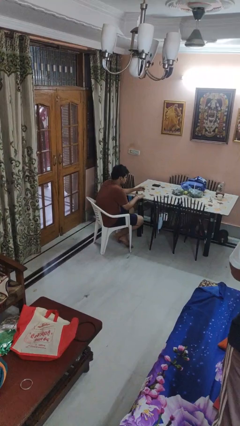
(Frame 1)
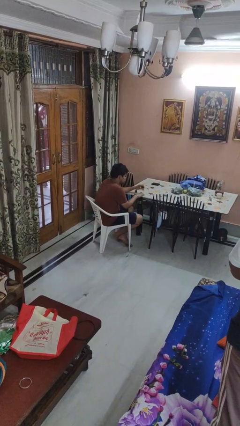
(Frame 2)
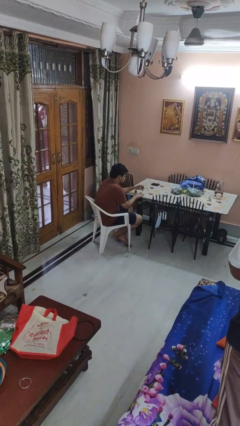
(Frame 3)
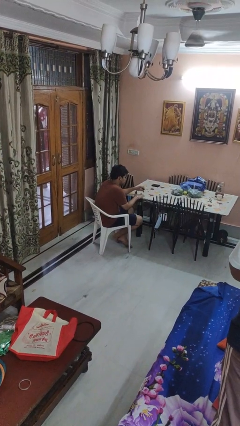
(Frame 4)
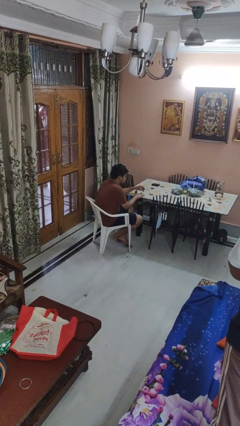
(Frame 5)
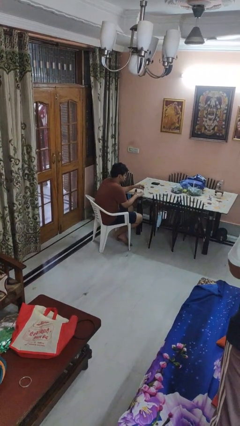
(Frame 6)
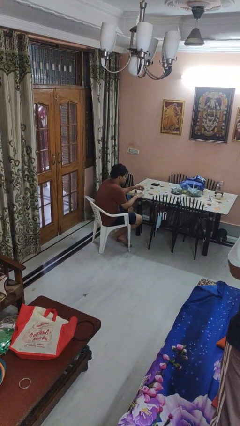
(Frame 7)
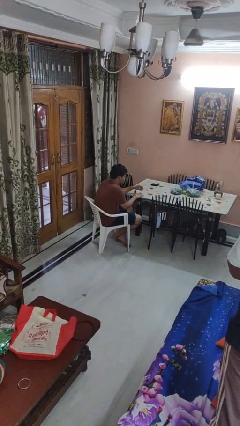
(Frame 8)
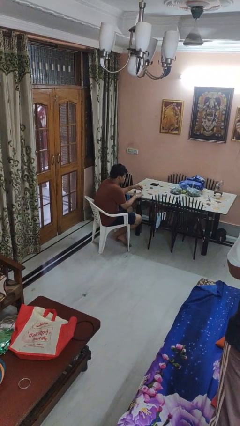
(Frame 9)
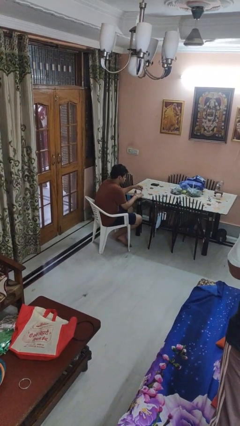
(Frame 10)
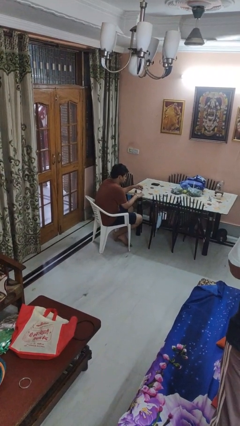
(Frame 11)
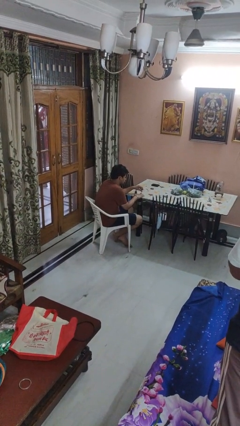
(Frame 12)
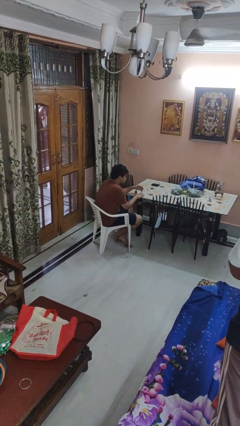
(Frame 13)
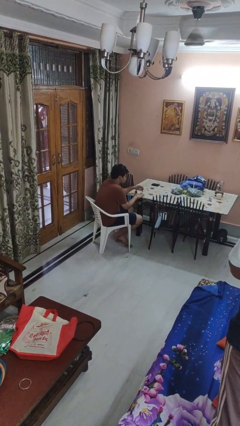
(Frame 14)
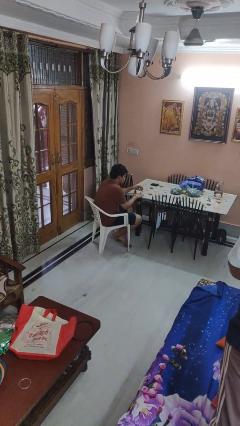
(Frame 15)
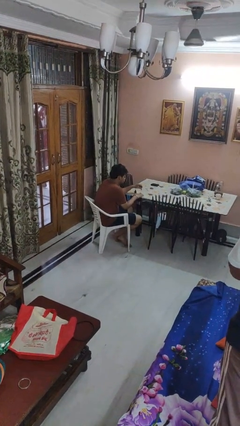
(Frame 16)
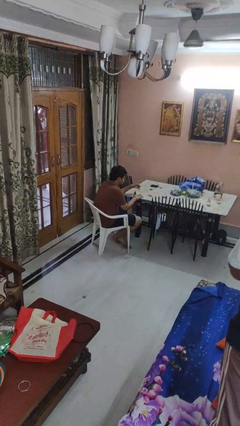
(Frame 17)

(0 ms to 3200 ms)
person paints fingernails

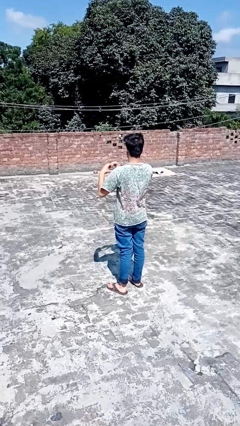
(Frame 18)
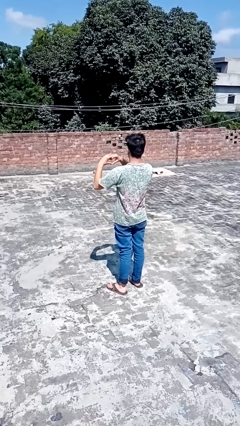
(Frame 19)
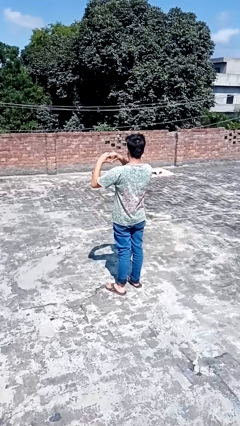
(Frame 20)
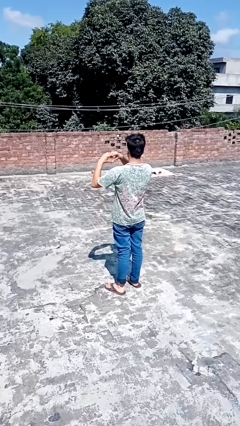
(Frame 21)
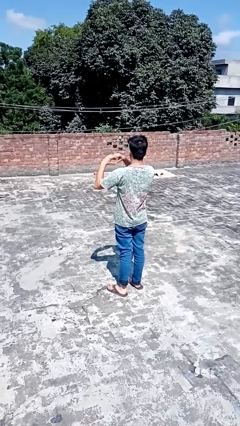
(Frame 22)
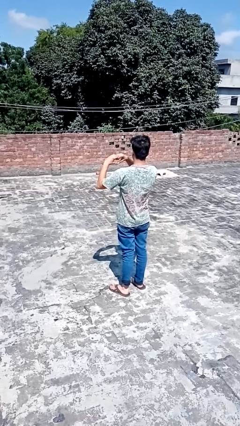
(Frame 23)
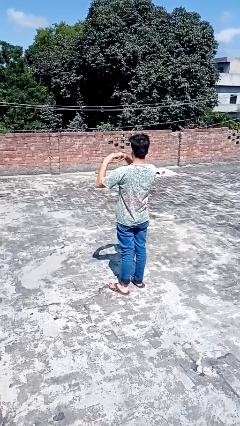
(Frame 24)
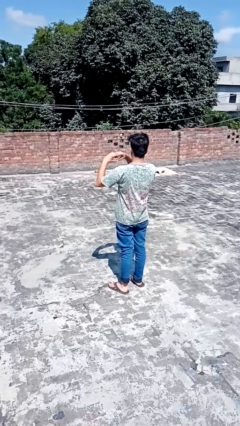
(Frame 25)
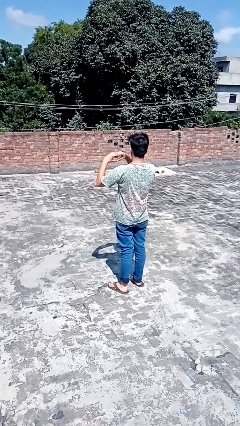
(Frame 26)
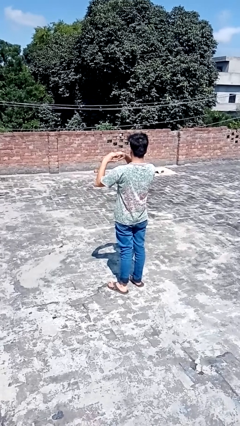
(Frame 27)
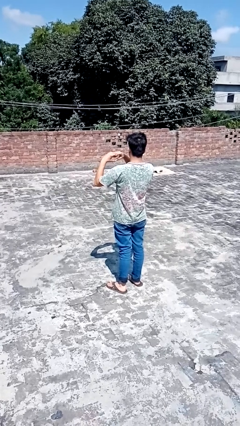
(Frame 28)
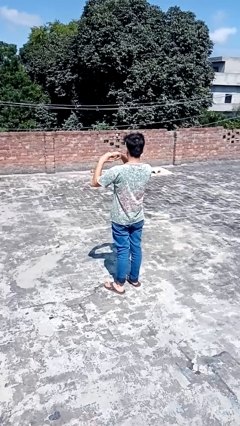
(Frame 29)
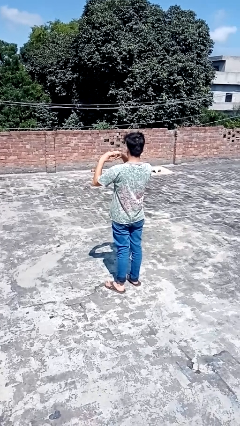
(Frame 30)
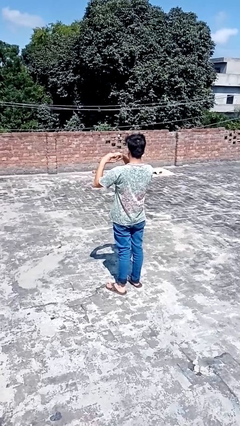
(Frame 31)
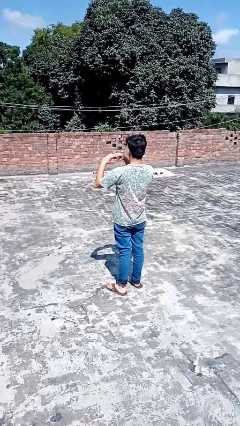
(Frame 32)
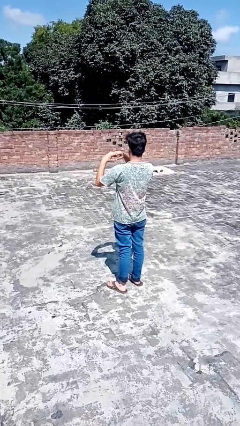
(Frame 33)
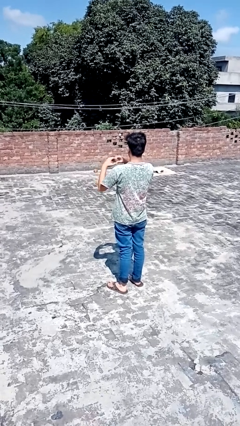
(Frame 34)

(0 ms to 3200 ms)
person gestures heart

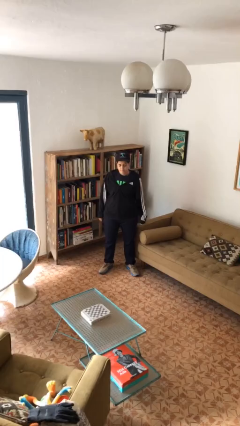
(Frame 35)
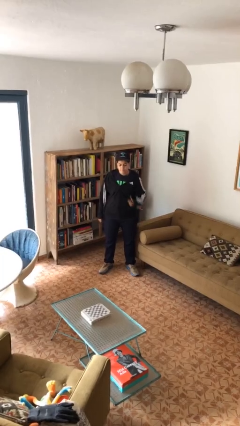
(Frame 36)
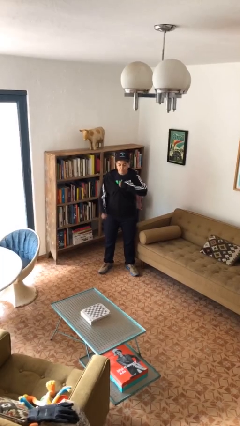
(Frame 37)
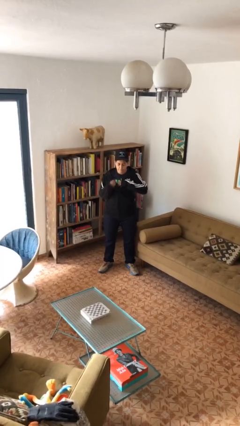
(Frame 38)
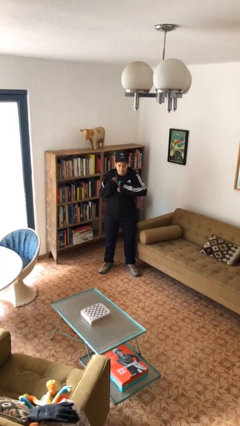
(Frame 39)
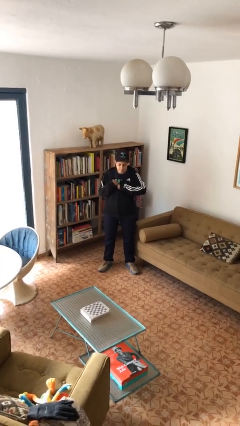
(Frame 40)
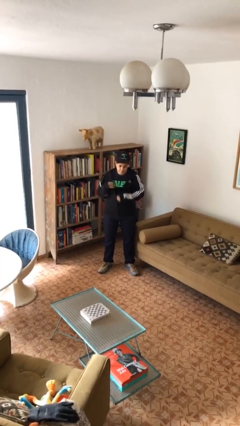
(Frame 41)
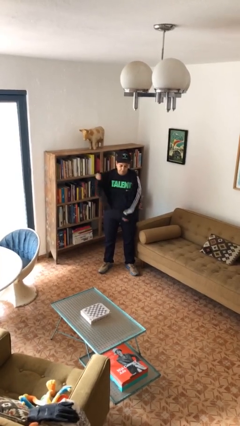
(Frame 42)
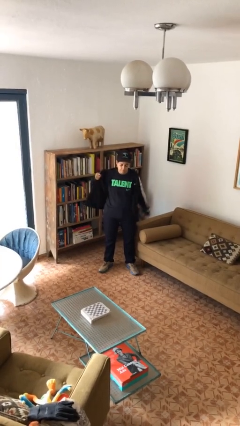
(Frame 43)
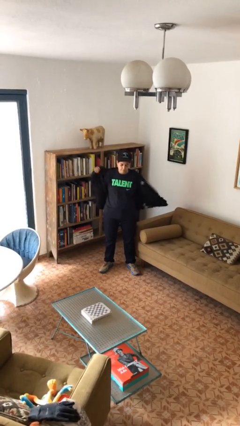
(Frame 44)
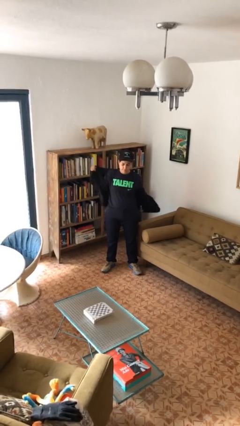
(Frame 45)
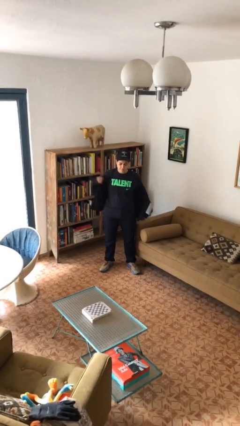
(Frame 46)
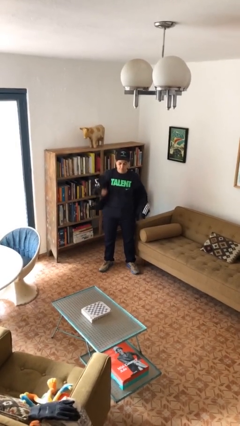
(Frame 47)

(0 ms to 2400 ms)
person unzips jacket

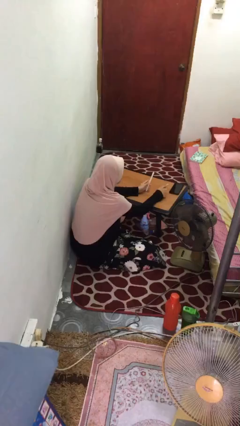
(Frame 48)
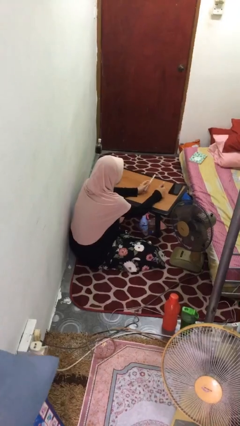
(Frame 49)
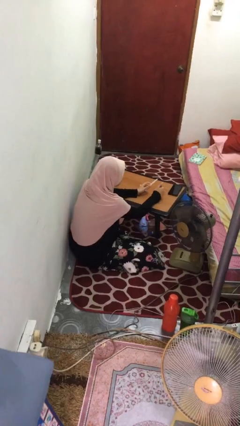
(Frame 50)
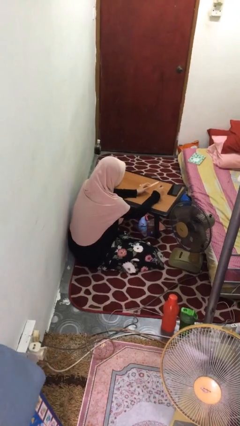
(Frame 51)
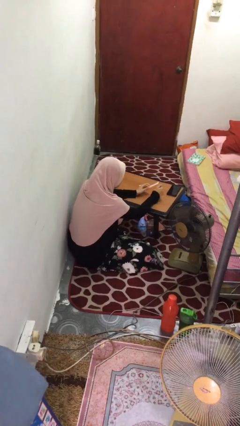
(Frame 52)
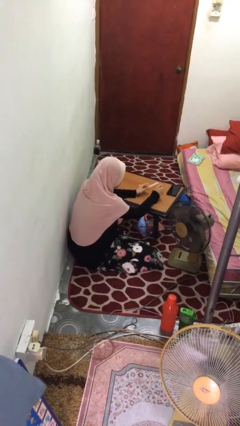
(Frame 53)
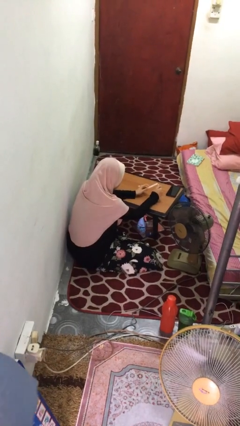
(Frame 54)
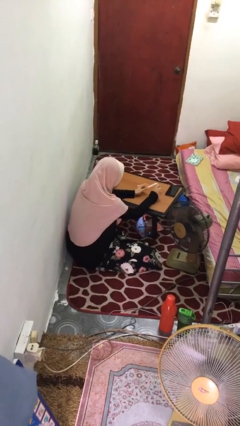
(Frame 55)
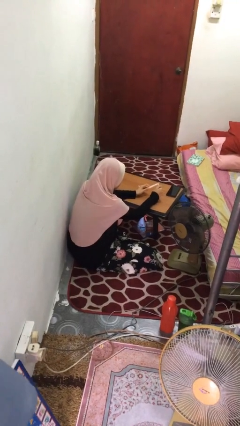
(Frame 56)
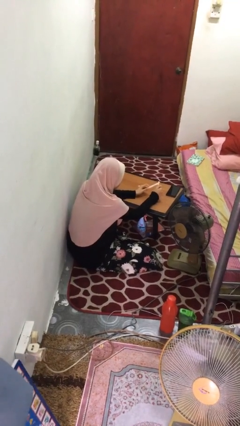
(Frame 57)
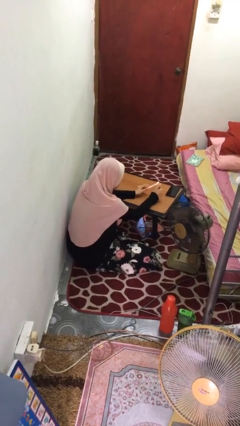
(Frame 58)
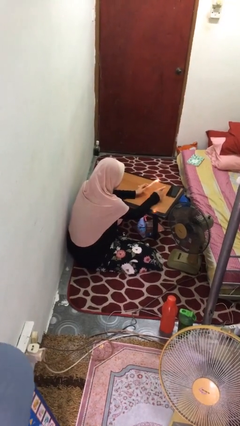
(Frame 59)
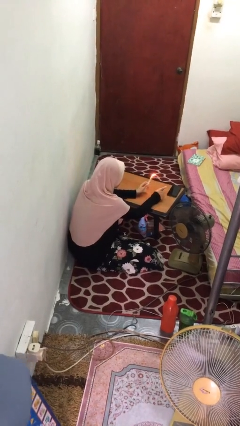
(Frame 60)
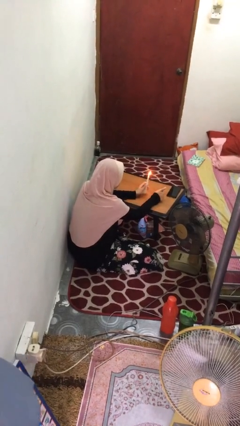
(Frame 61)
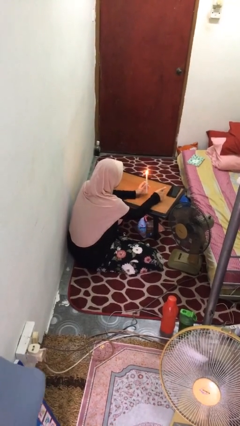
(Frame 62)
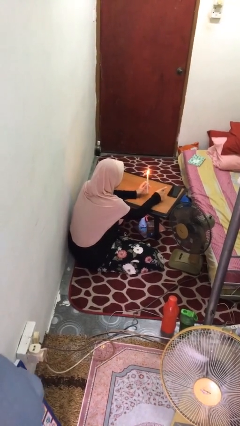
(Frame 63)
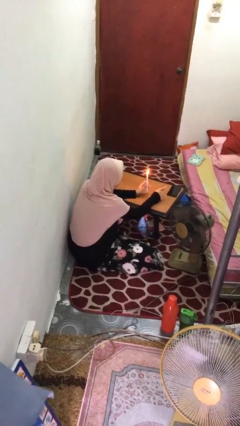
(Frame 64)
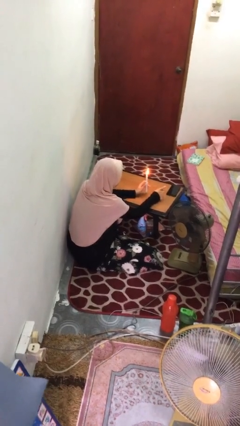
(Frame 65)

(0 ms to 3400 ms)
person lights candle

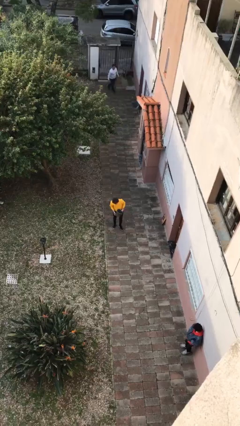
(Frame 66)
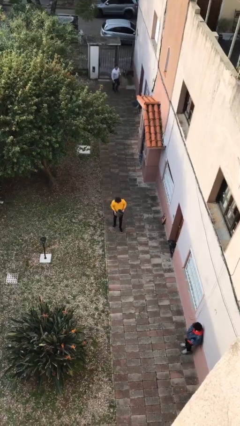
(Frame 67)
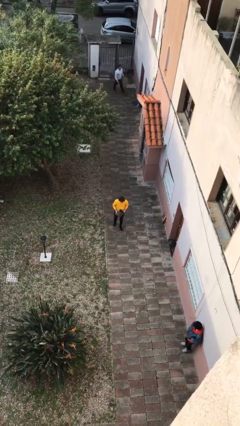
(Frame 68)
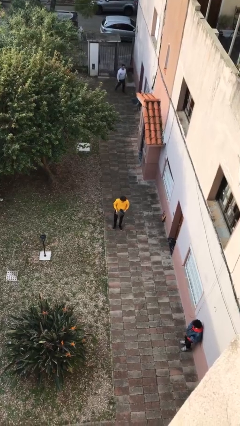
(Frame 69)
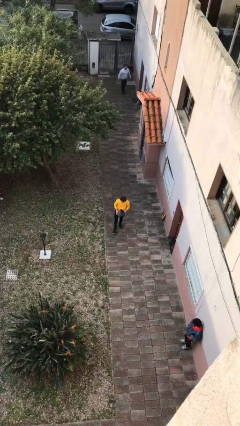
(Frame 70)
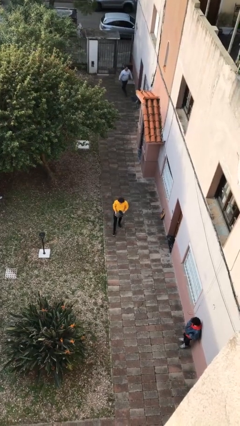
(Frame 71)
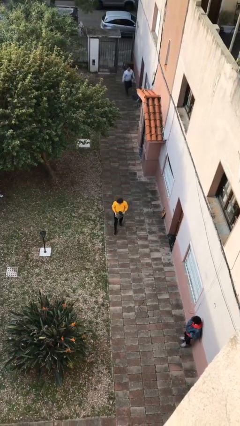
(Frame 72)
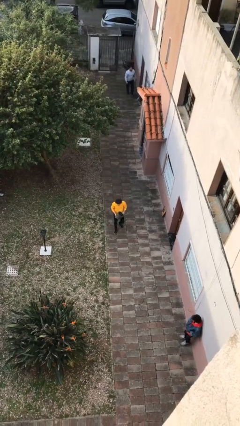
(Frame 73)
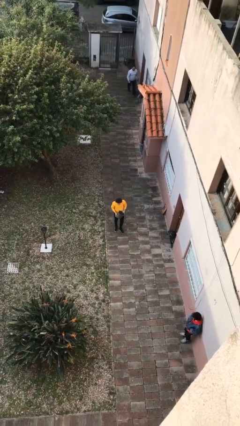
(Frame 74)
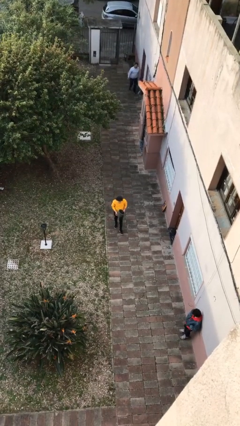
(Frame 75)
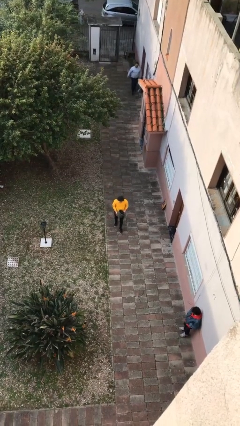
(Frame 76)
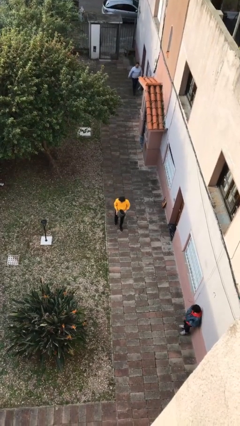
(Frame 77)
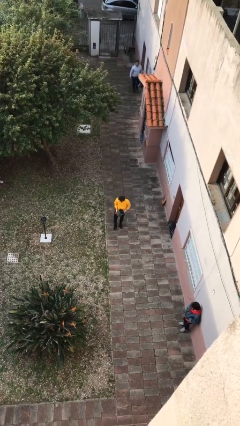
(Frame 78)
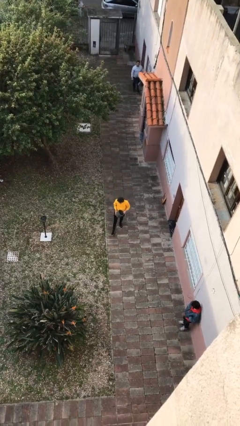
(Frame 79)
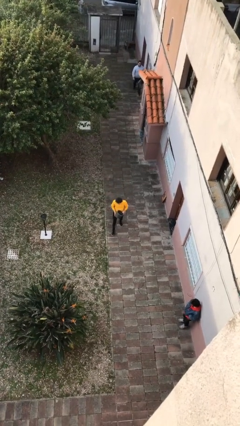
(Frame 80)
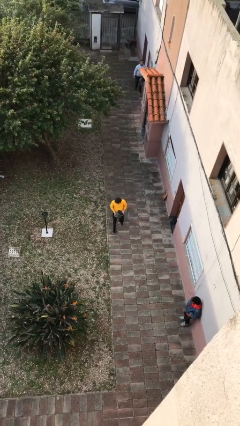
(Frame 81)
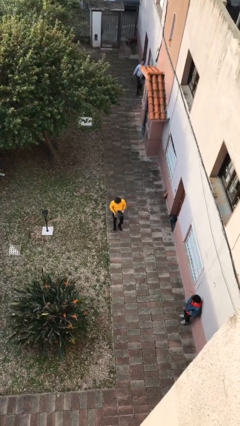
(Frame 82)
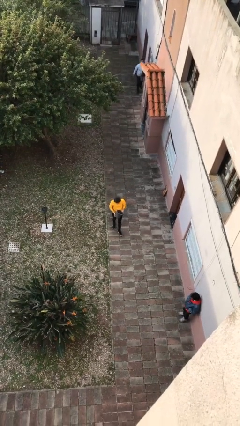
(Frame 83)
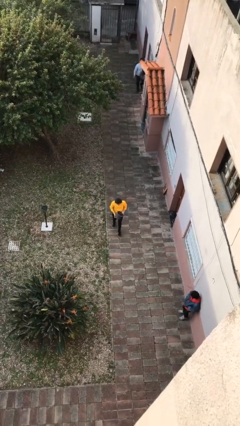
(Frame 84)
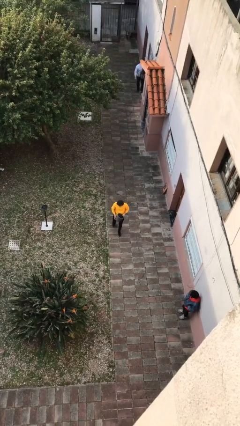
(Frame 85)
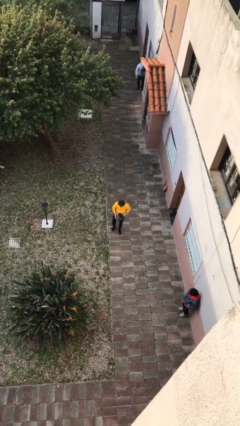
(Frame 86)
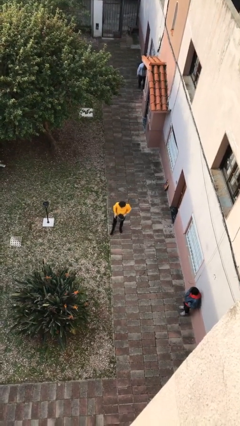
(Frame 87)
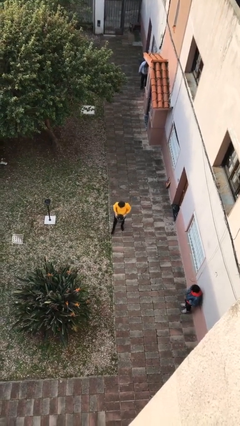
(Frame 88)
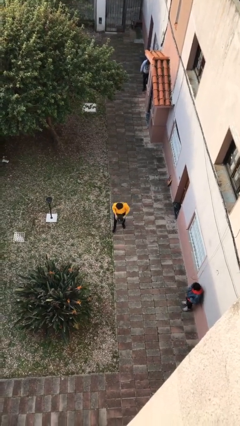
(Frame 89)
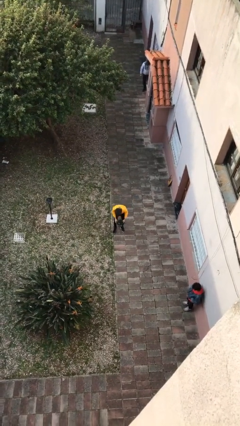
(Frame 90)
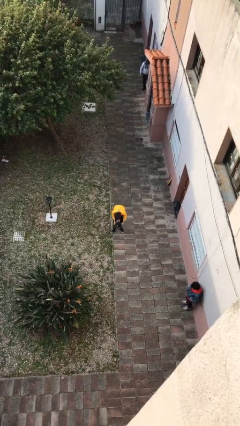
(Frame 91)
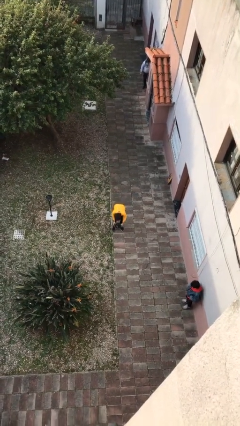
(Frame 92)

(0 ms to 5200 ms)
person carries heavy object

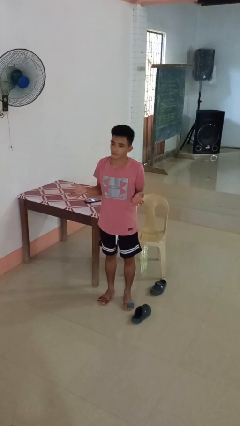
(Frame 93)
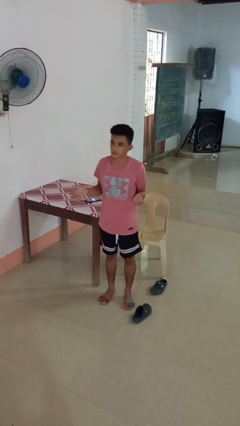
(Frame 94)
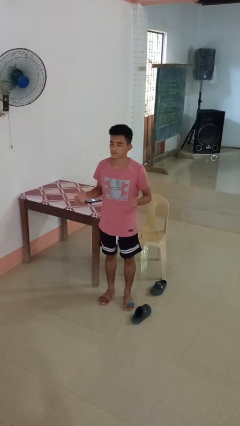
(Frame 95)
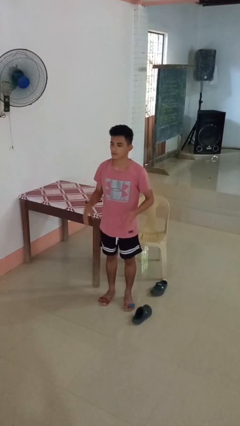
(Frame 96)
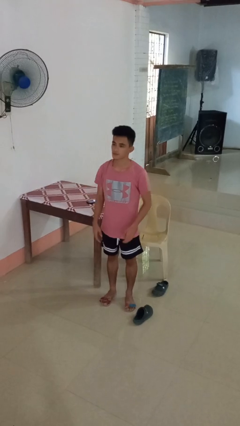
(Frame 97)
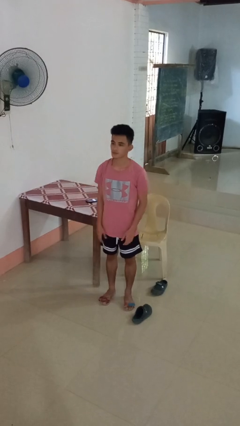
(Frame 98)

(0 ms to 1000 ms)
person shrugs
